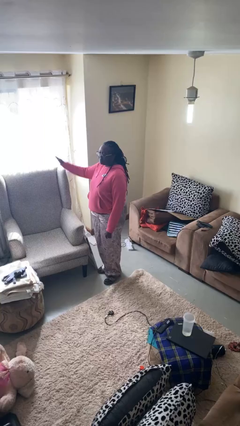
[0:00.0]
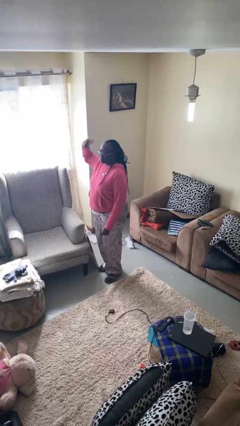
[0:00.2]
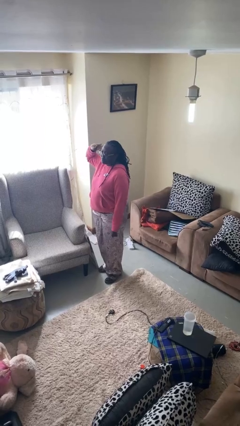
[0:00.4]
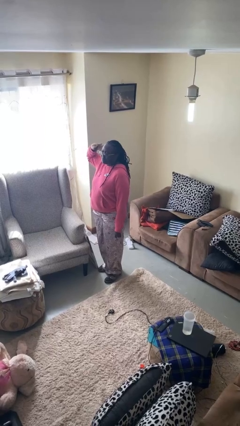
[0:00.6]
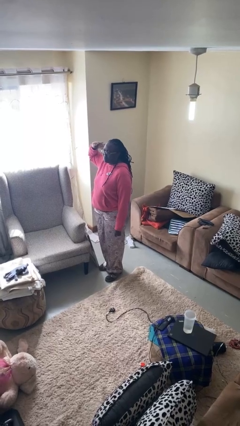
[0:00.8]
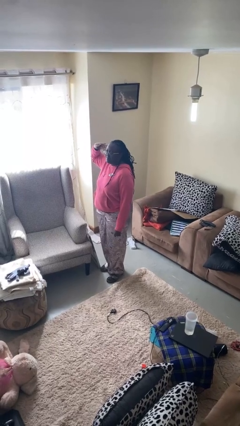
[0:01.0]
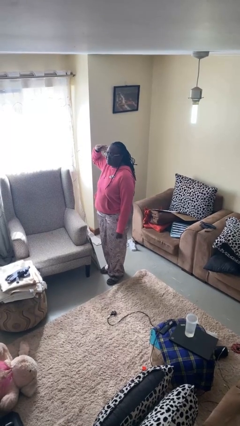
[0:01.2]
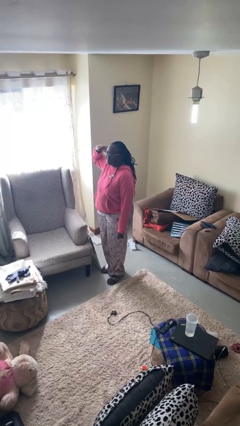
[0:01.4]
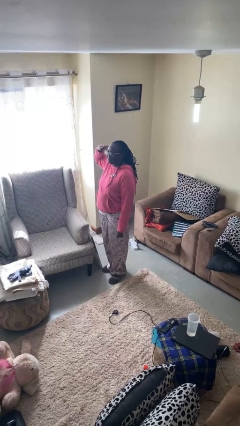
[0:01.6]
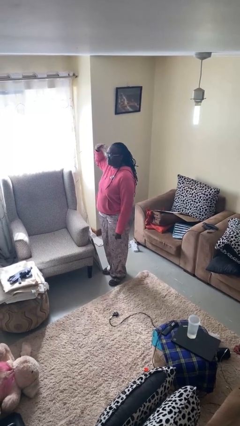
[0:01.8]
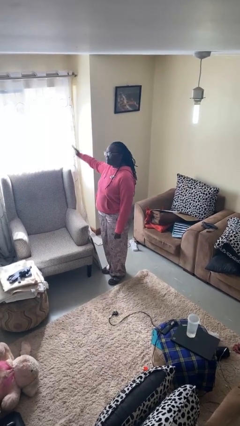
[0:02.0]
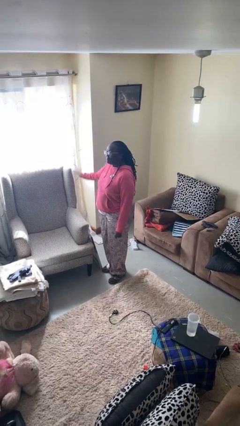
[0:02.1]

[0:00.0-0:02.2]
person salutes

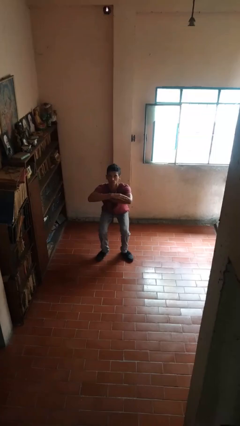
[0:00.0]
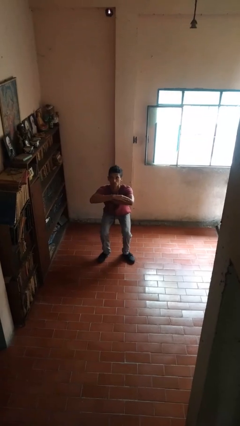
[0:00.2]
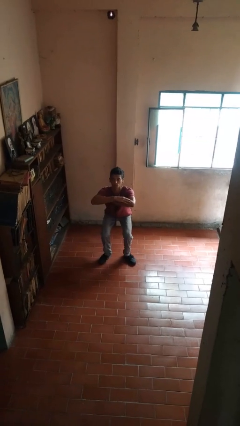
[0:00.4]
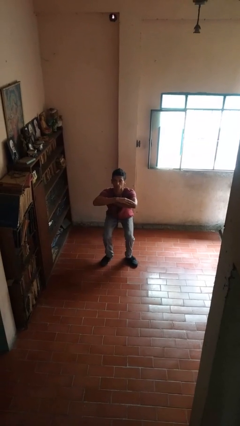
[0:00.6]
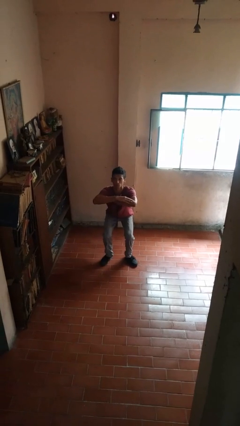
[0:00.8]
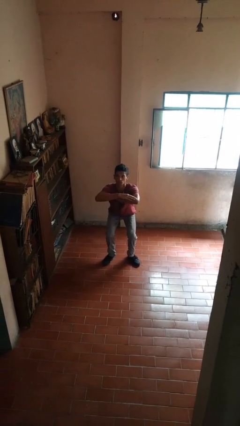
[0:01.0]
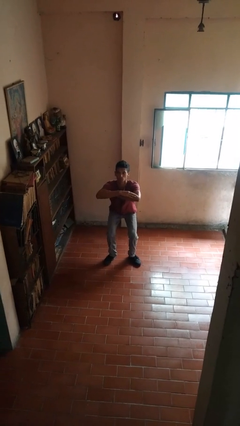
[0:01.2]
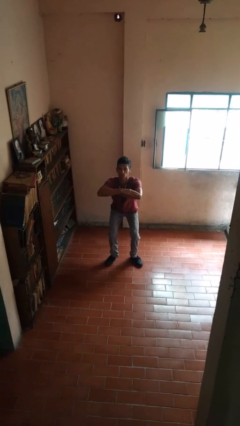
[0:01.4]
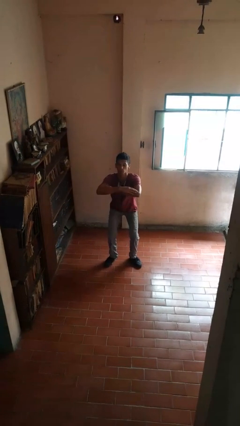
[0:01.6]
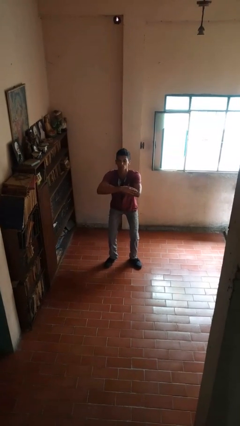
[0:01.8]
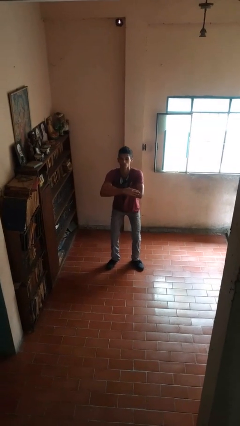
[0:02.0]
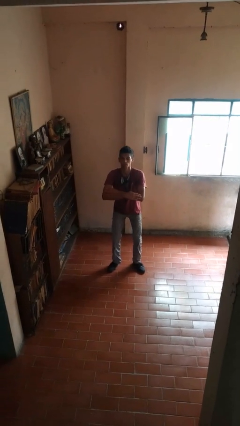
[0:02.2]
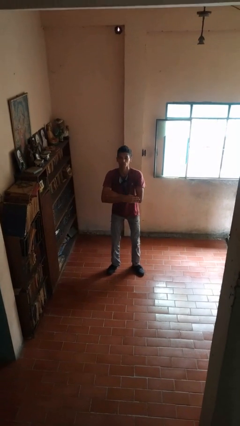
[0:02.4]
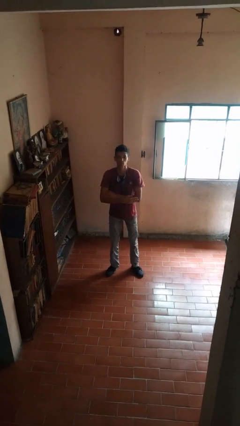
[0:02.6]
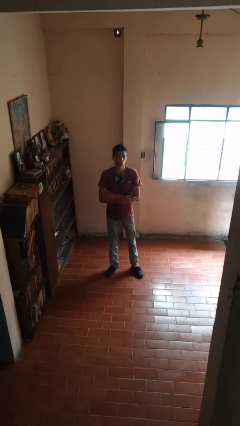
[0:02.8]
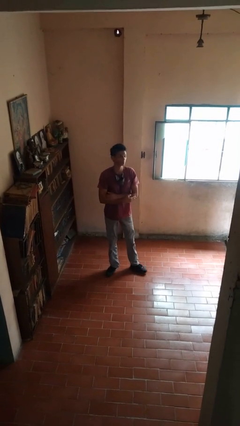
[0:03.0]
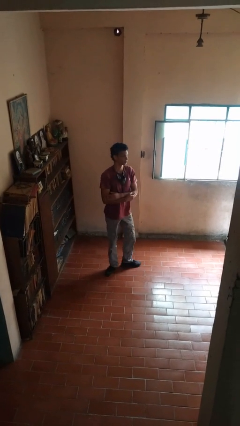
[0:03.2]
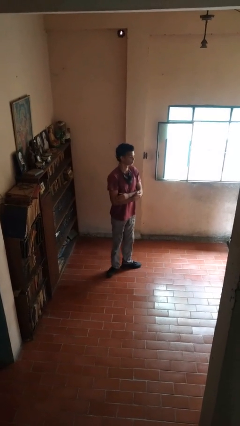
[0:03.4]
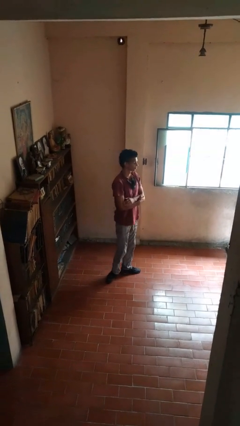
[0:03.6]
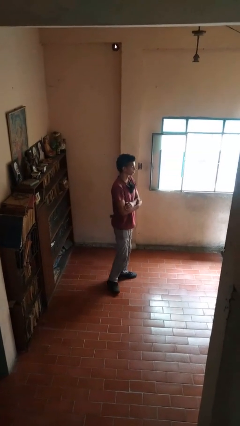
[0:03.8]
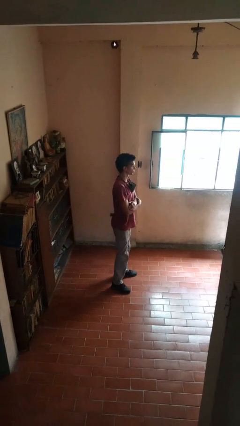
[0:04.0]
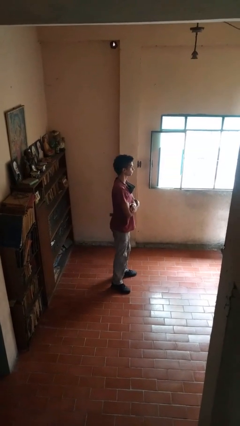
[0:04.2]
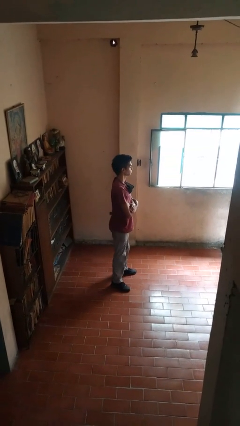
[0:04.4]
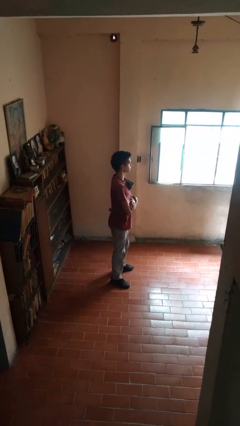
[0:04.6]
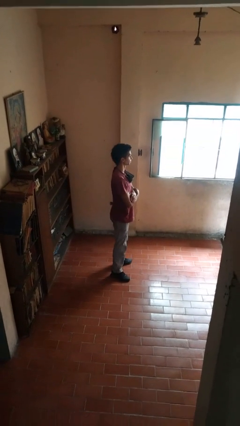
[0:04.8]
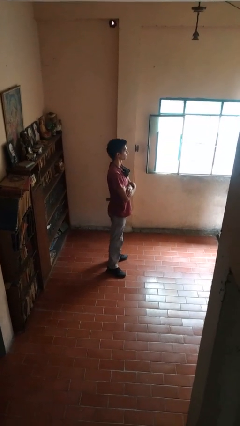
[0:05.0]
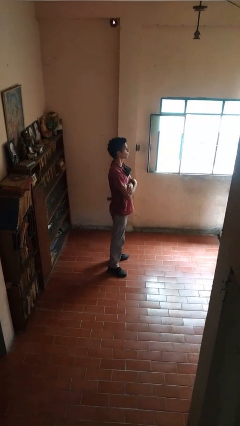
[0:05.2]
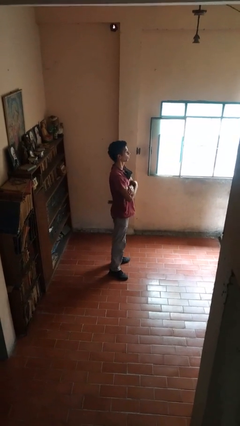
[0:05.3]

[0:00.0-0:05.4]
person stands up

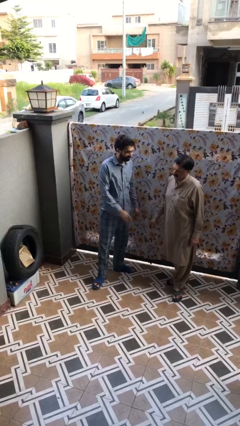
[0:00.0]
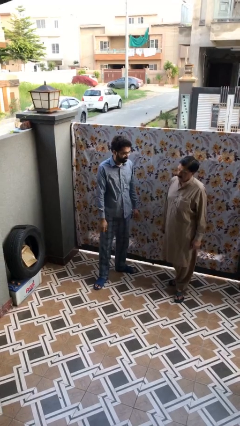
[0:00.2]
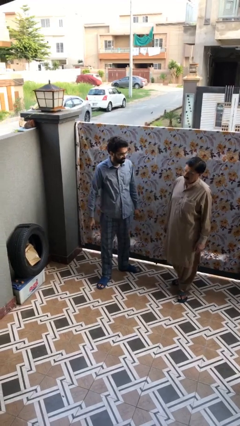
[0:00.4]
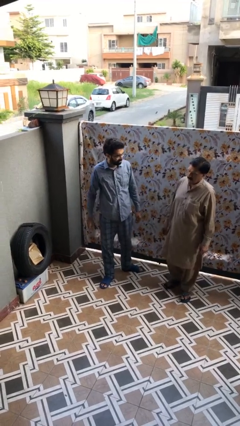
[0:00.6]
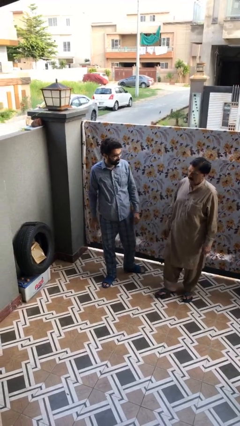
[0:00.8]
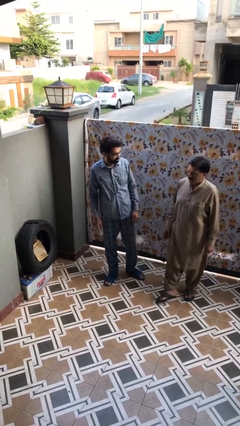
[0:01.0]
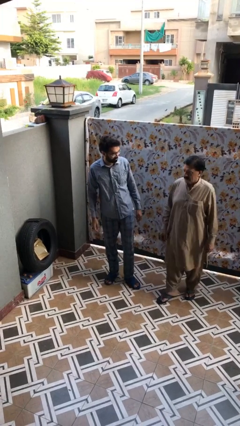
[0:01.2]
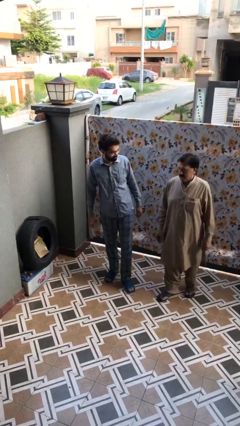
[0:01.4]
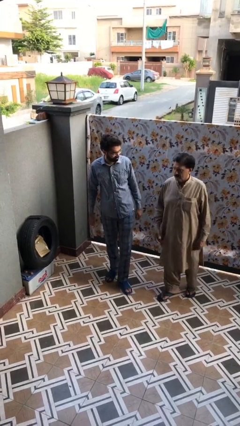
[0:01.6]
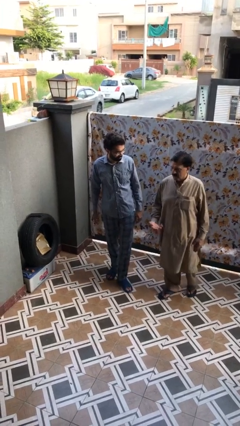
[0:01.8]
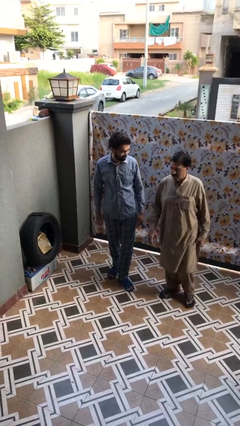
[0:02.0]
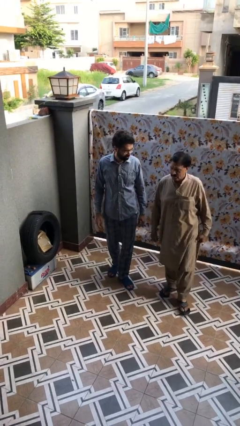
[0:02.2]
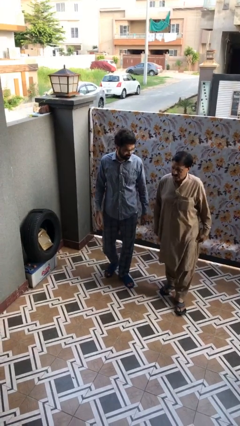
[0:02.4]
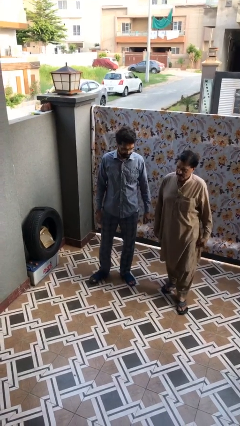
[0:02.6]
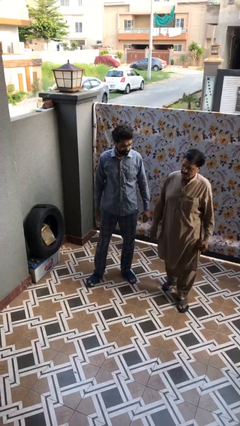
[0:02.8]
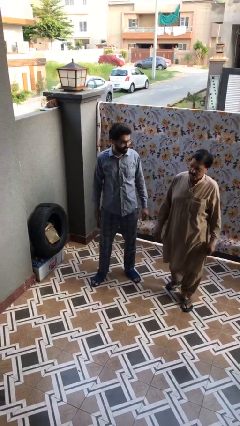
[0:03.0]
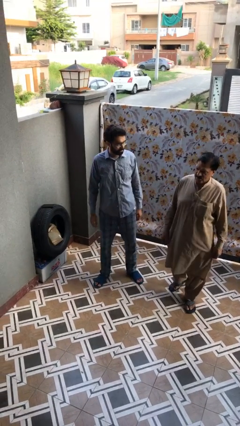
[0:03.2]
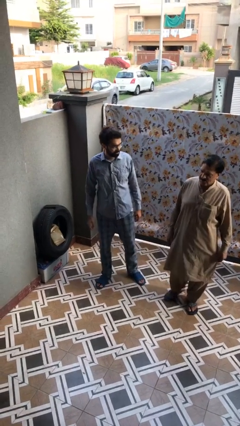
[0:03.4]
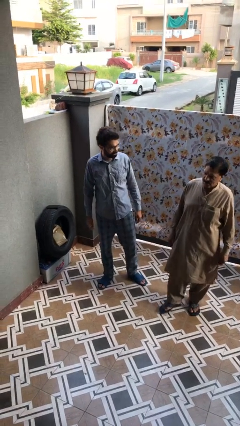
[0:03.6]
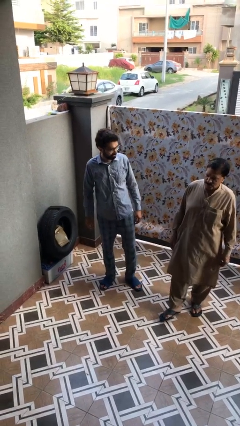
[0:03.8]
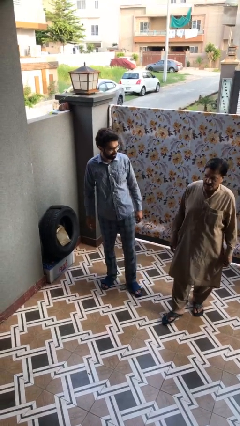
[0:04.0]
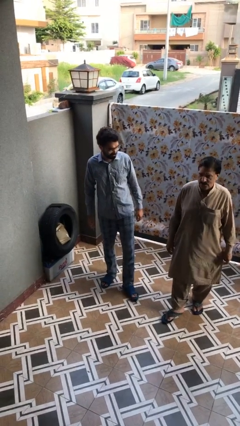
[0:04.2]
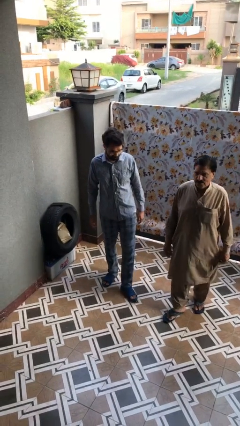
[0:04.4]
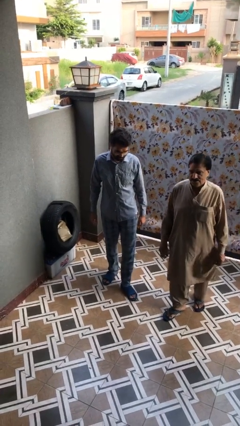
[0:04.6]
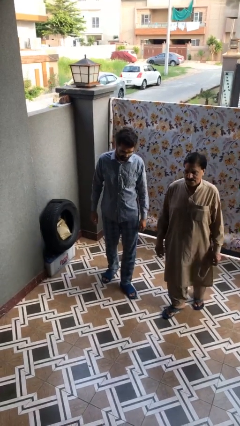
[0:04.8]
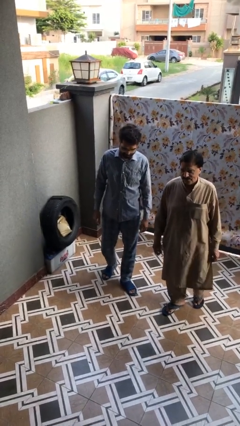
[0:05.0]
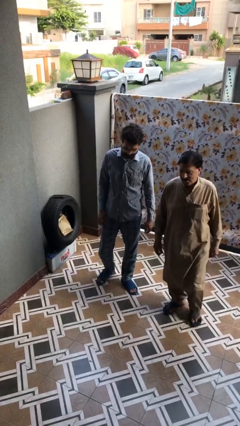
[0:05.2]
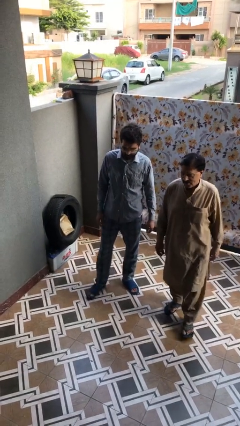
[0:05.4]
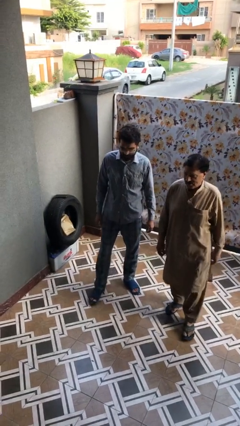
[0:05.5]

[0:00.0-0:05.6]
person talks to person

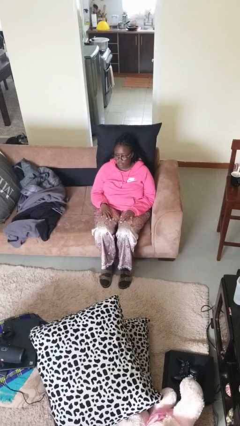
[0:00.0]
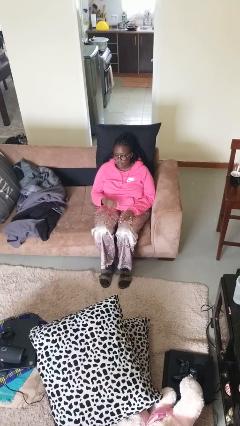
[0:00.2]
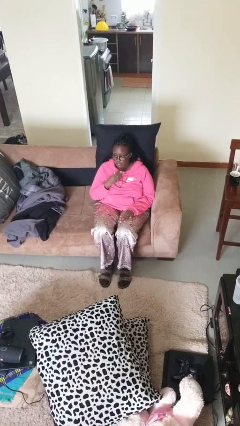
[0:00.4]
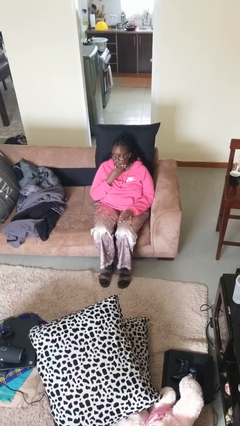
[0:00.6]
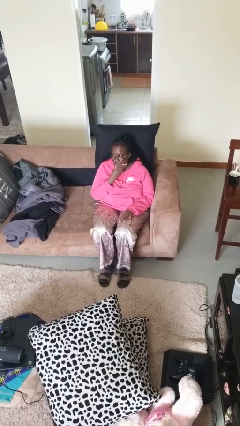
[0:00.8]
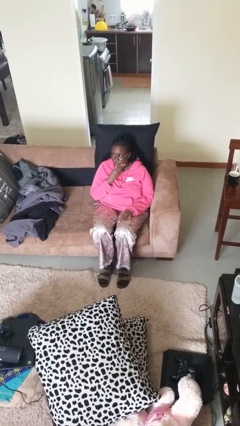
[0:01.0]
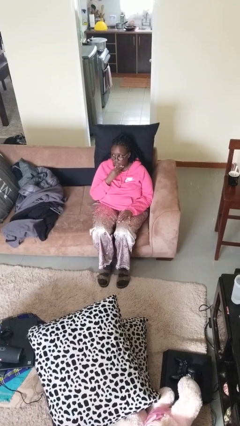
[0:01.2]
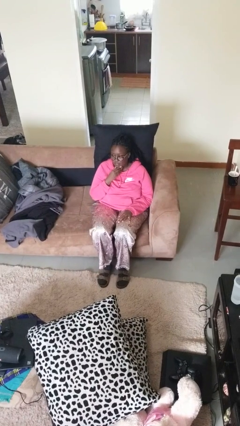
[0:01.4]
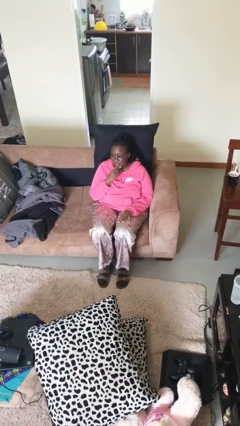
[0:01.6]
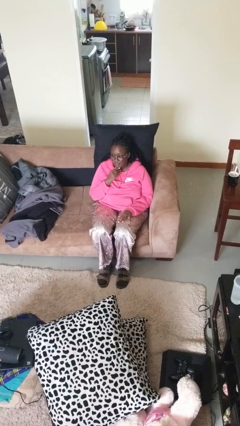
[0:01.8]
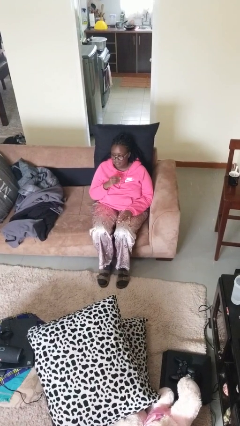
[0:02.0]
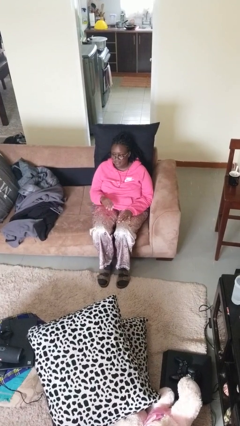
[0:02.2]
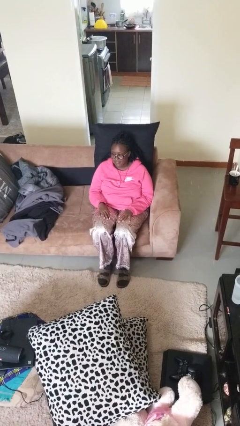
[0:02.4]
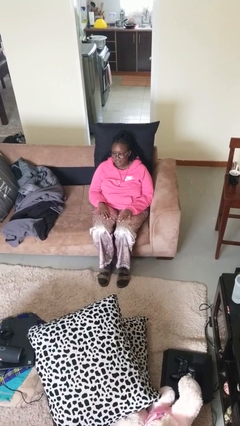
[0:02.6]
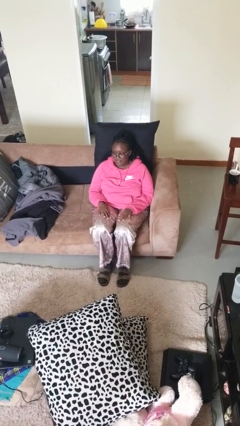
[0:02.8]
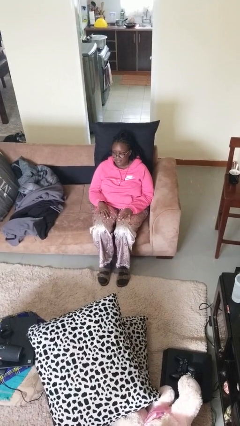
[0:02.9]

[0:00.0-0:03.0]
person strokes chin

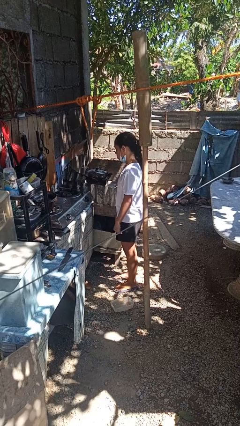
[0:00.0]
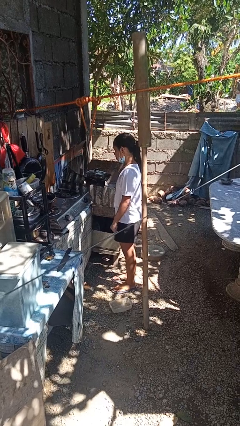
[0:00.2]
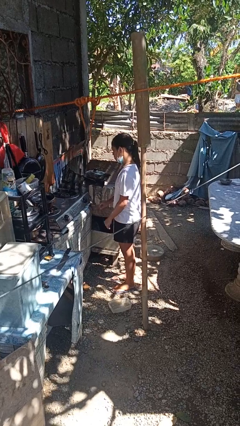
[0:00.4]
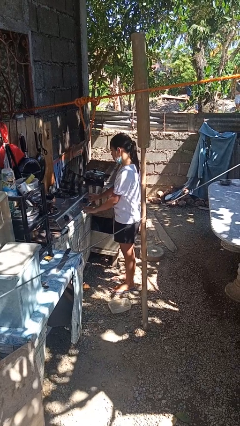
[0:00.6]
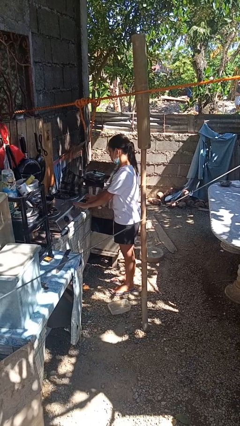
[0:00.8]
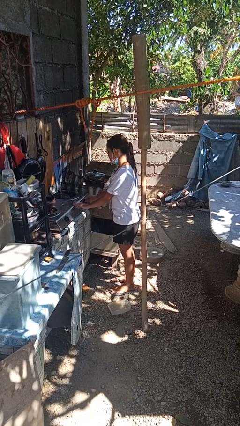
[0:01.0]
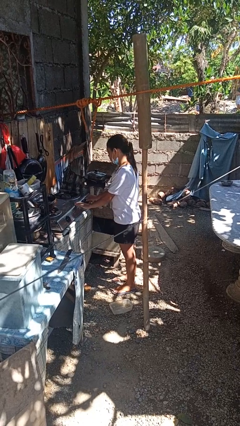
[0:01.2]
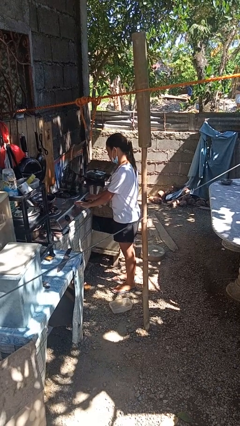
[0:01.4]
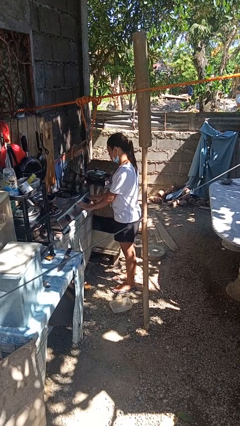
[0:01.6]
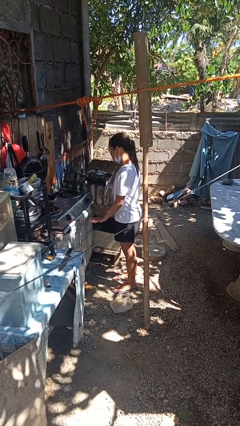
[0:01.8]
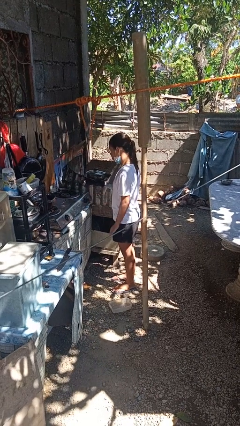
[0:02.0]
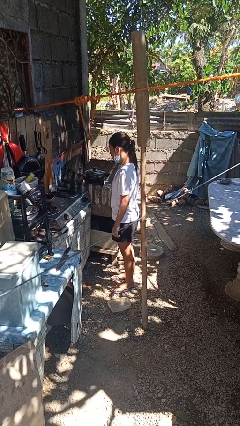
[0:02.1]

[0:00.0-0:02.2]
person turns off stovetop
